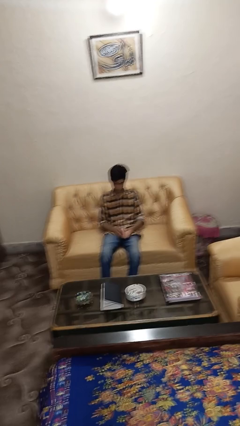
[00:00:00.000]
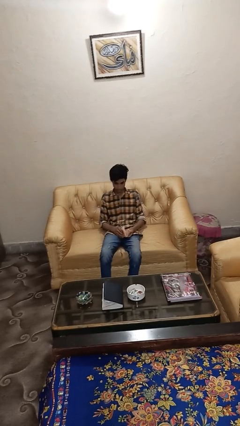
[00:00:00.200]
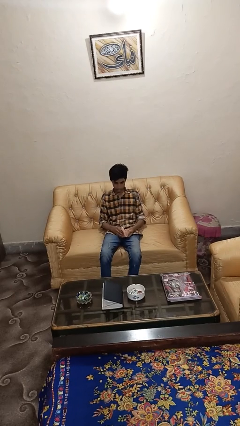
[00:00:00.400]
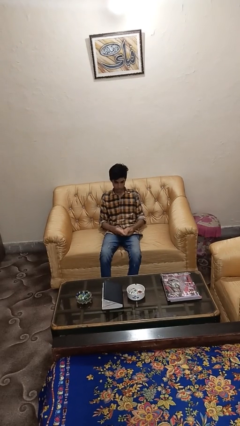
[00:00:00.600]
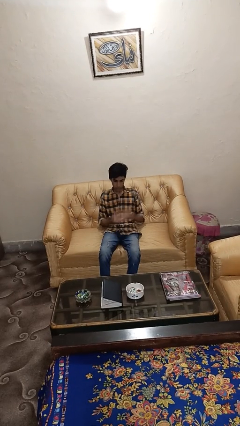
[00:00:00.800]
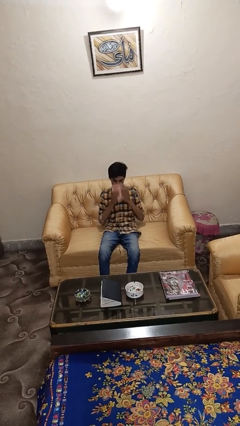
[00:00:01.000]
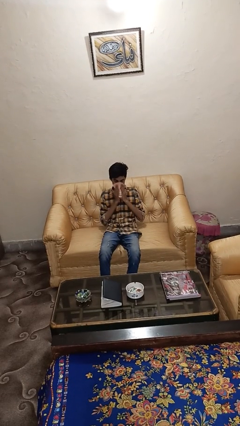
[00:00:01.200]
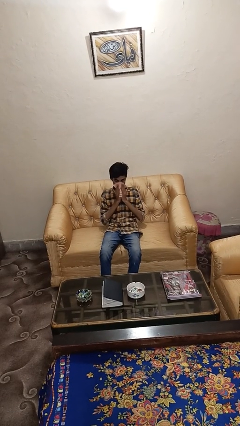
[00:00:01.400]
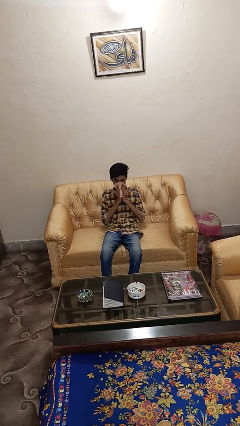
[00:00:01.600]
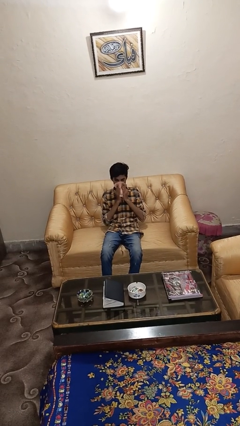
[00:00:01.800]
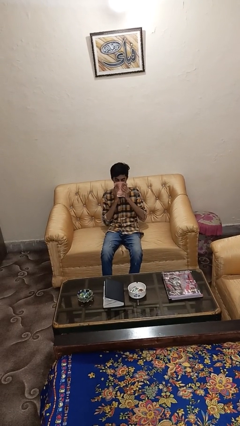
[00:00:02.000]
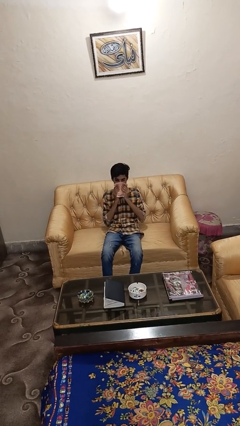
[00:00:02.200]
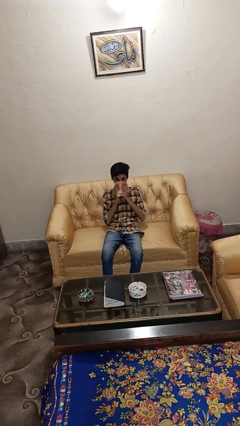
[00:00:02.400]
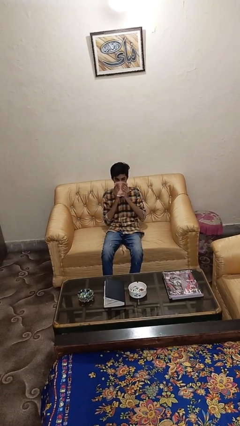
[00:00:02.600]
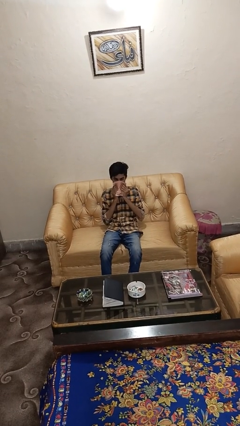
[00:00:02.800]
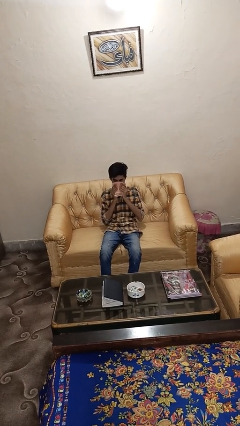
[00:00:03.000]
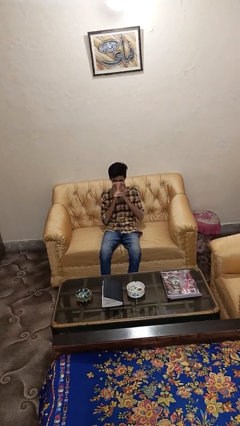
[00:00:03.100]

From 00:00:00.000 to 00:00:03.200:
person blows nose

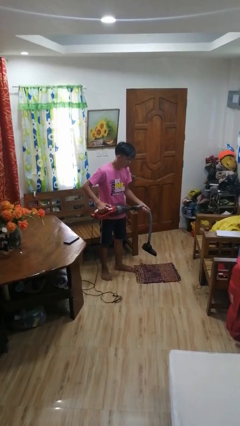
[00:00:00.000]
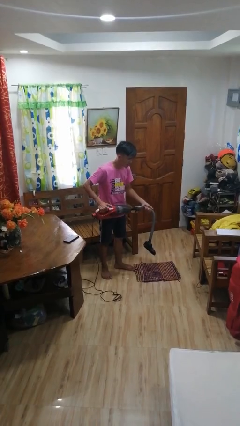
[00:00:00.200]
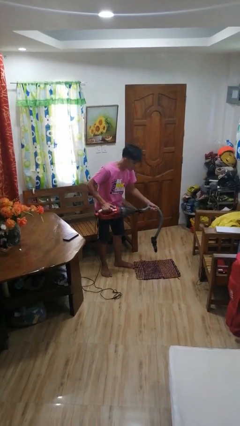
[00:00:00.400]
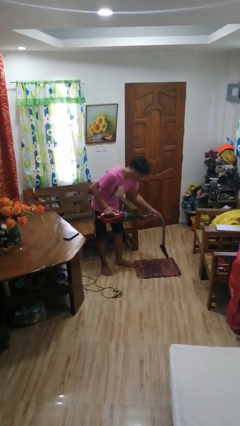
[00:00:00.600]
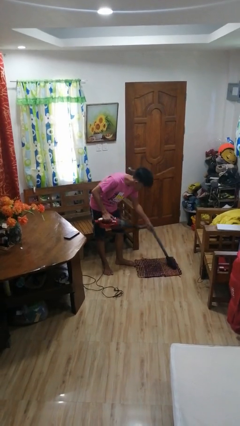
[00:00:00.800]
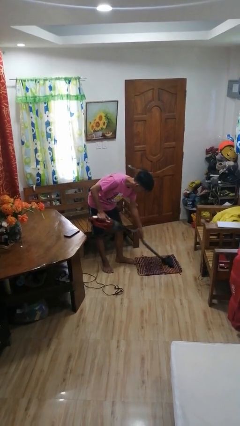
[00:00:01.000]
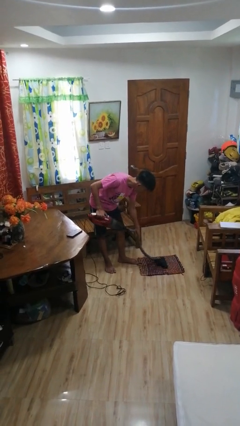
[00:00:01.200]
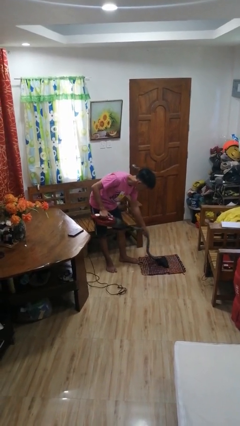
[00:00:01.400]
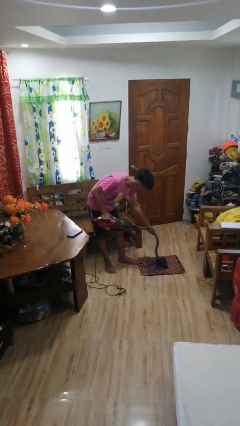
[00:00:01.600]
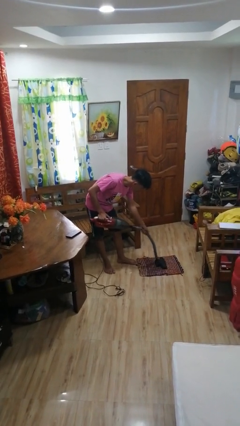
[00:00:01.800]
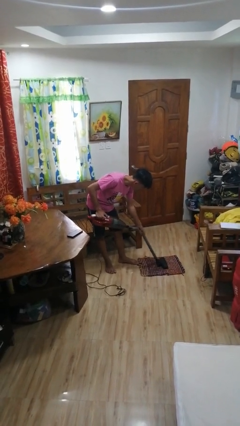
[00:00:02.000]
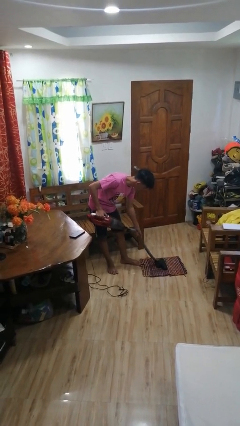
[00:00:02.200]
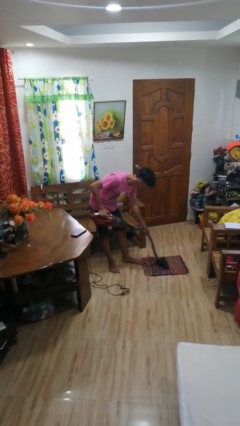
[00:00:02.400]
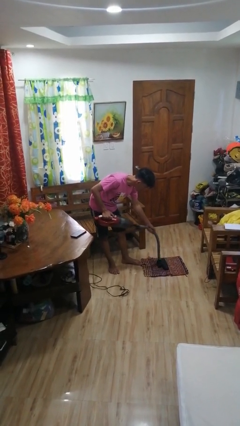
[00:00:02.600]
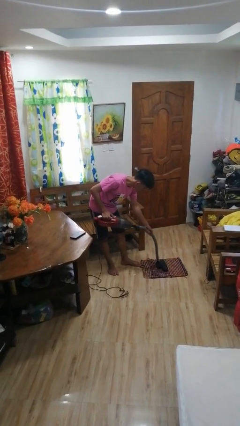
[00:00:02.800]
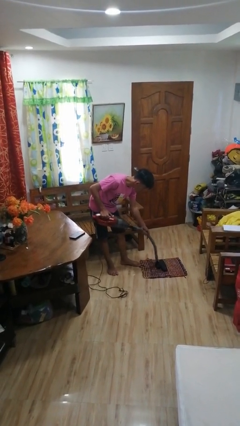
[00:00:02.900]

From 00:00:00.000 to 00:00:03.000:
person vacuums carpet

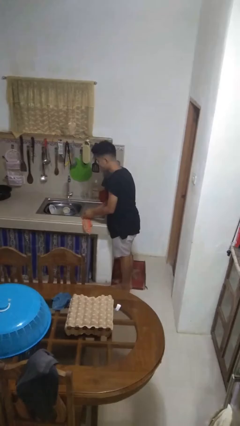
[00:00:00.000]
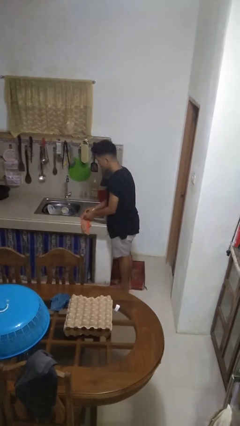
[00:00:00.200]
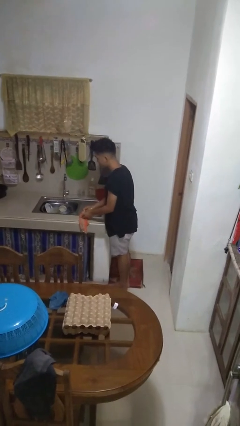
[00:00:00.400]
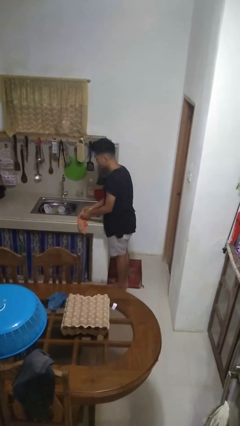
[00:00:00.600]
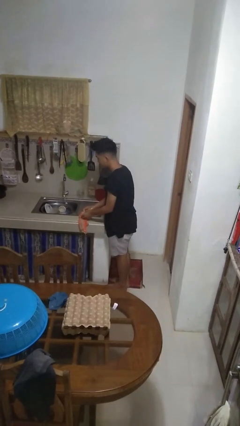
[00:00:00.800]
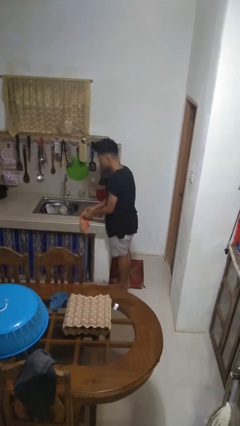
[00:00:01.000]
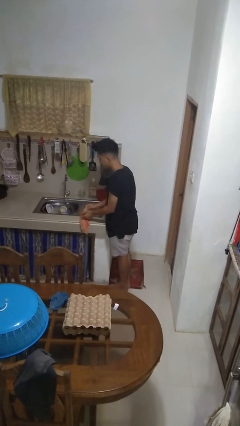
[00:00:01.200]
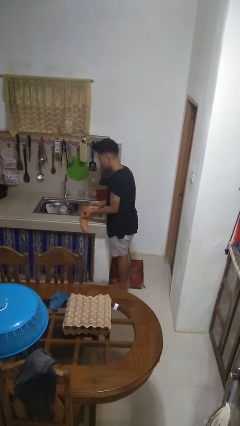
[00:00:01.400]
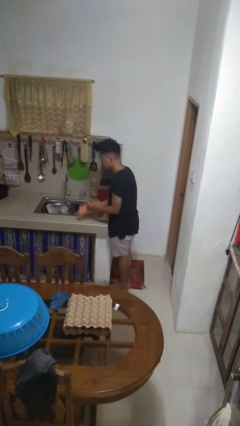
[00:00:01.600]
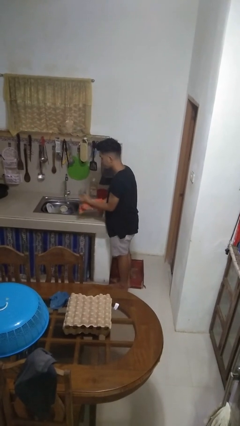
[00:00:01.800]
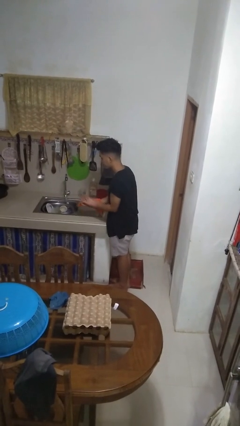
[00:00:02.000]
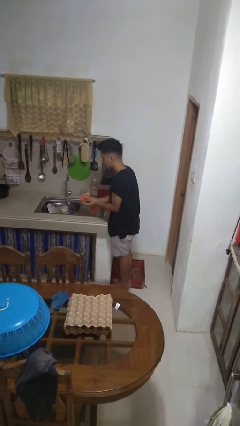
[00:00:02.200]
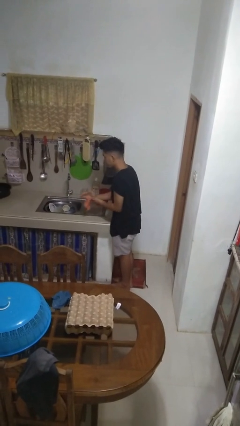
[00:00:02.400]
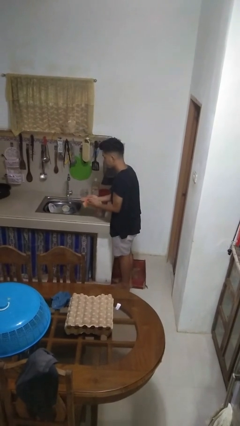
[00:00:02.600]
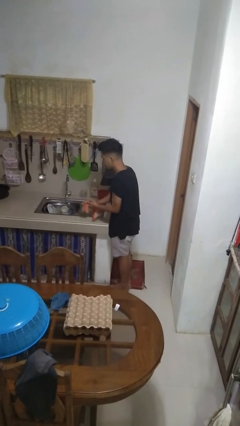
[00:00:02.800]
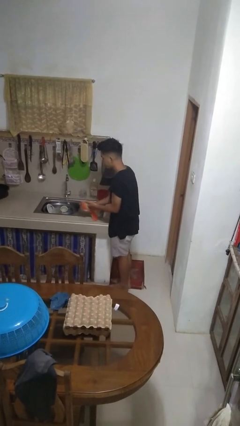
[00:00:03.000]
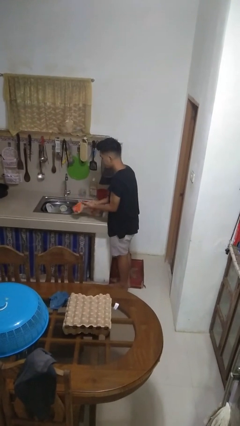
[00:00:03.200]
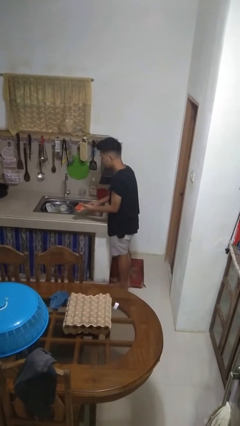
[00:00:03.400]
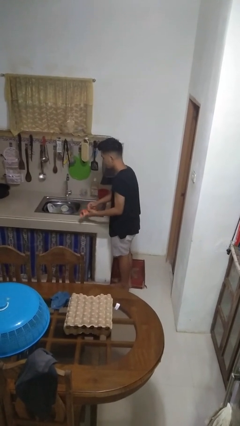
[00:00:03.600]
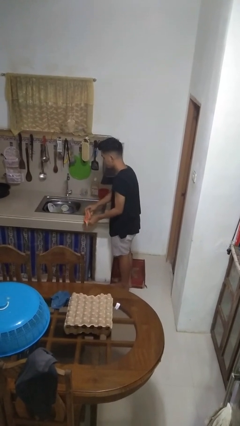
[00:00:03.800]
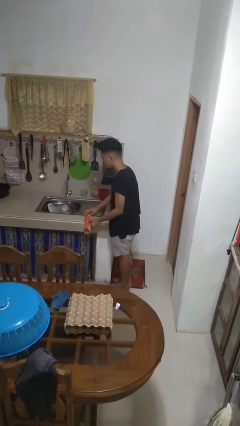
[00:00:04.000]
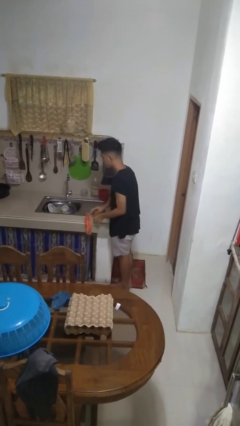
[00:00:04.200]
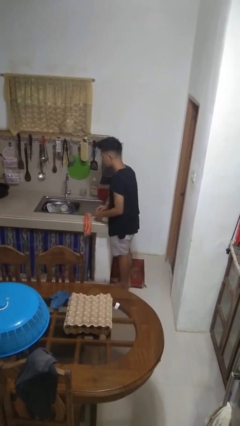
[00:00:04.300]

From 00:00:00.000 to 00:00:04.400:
person dries hands with towel

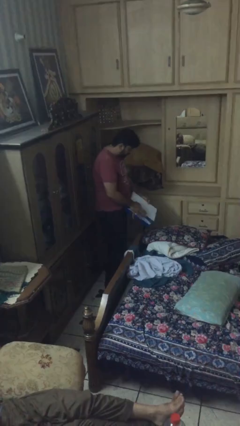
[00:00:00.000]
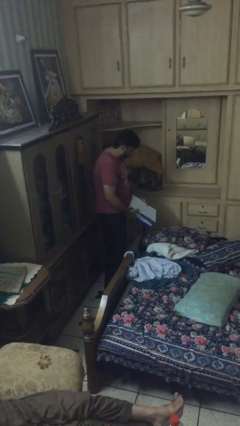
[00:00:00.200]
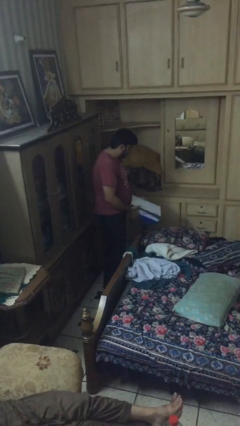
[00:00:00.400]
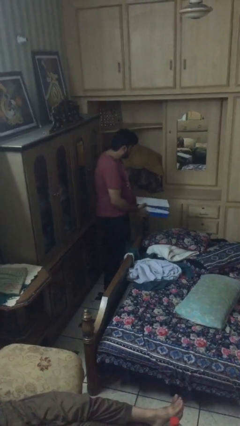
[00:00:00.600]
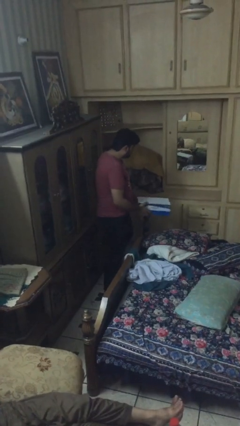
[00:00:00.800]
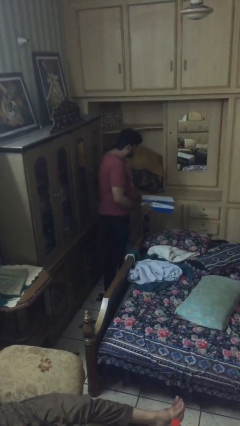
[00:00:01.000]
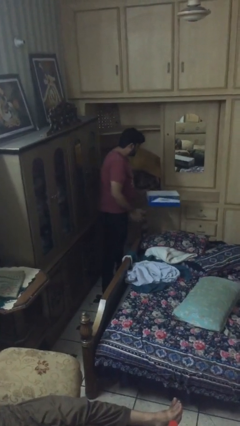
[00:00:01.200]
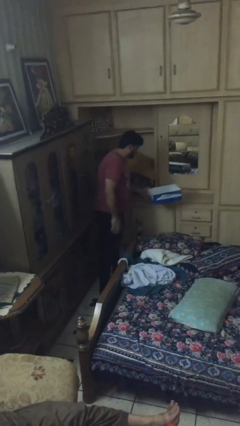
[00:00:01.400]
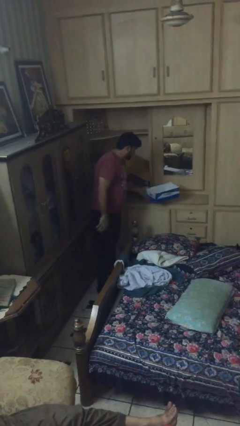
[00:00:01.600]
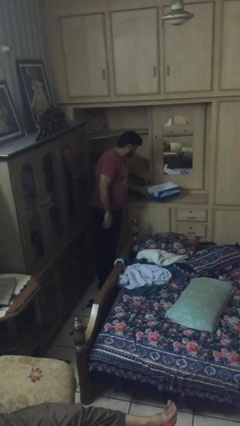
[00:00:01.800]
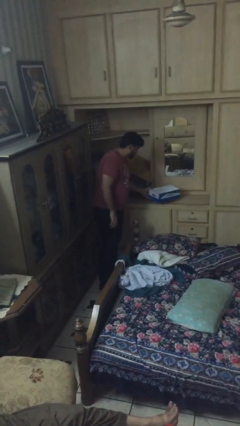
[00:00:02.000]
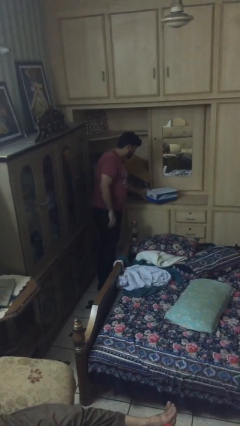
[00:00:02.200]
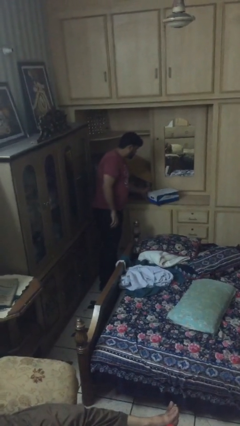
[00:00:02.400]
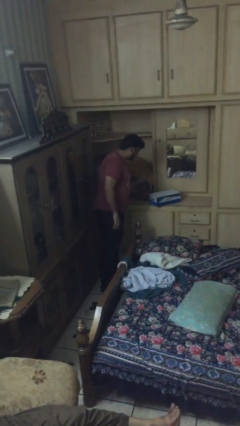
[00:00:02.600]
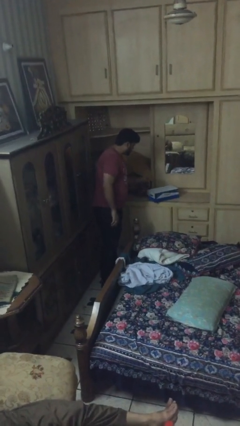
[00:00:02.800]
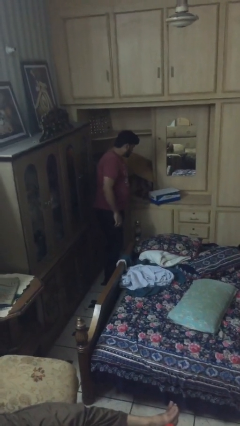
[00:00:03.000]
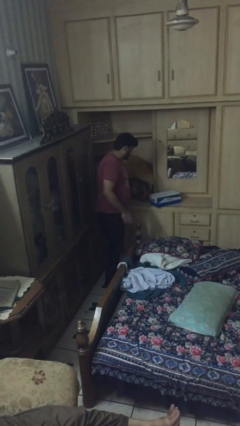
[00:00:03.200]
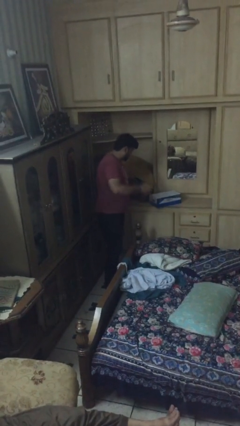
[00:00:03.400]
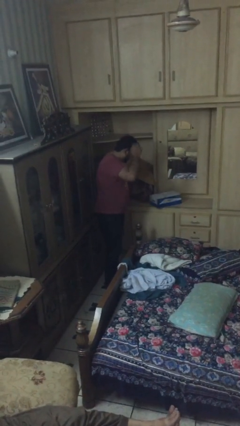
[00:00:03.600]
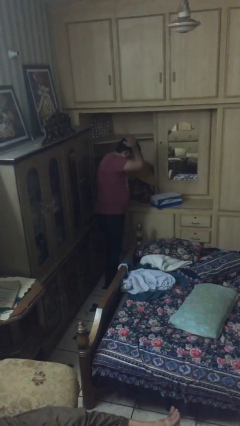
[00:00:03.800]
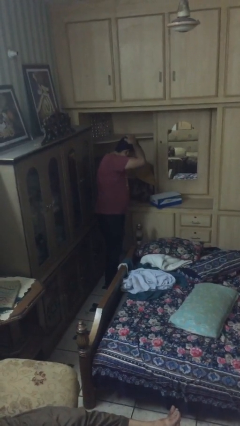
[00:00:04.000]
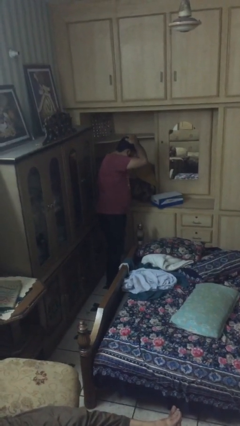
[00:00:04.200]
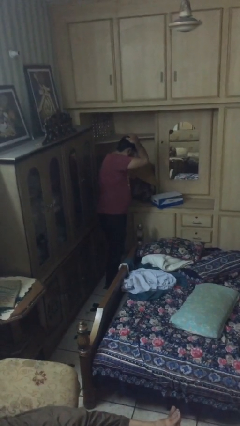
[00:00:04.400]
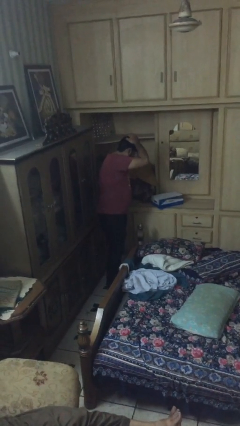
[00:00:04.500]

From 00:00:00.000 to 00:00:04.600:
person puts down object on table

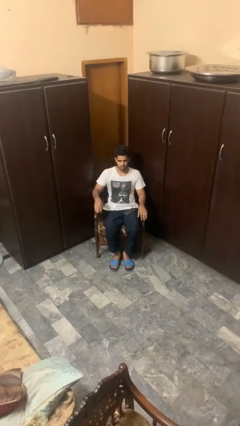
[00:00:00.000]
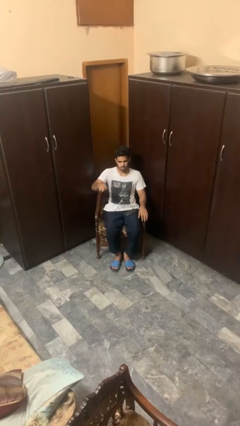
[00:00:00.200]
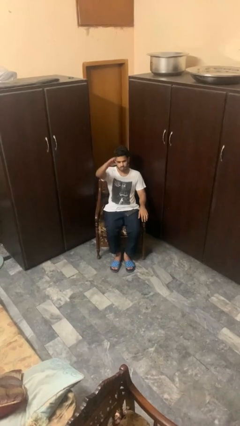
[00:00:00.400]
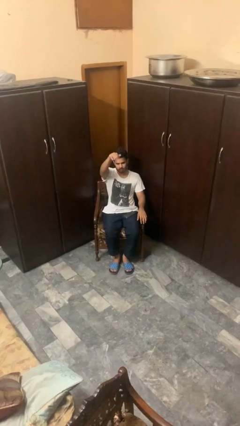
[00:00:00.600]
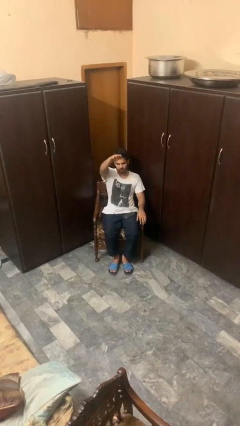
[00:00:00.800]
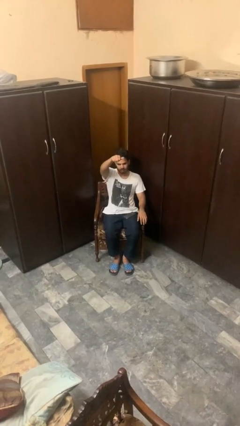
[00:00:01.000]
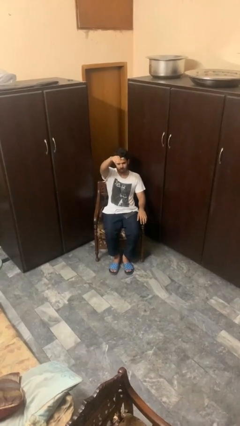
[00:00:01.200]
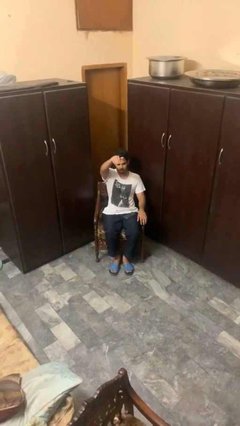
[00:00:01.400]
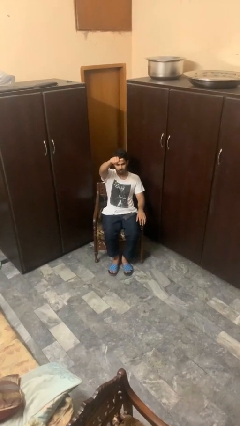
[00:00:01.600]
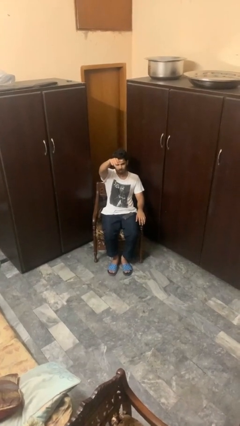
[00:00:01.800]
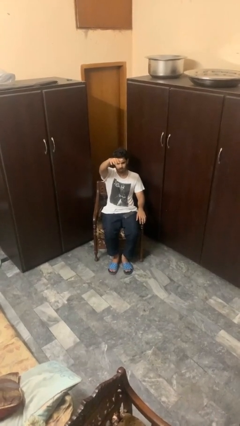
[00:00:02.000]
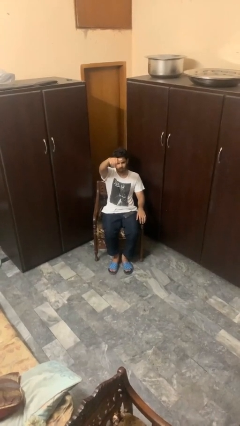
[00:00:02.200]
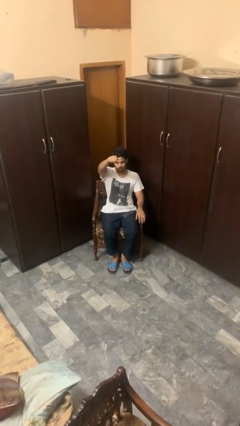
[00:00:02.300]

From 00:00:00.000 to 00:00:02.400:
person gestures come here
